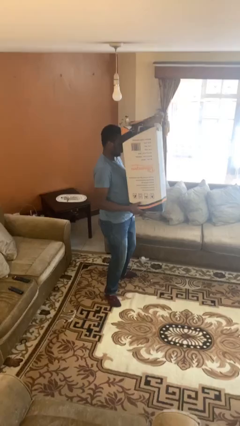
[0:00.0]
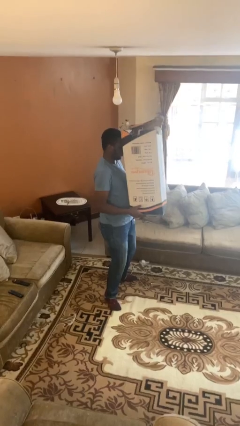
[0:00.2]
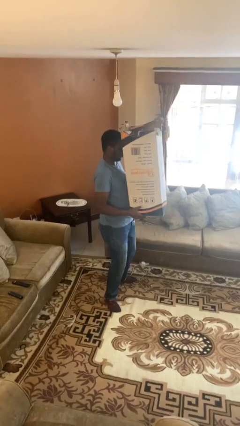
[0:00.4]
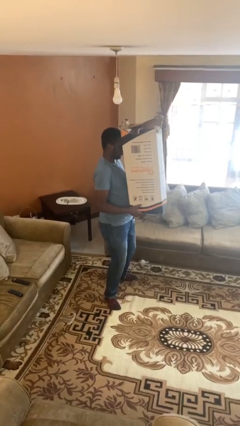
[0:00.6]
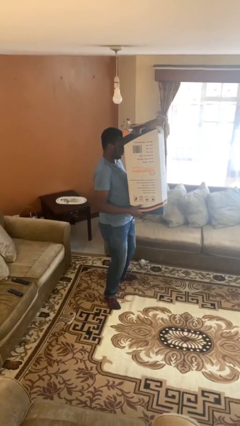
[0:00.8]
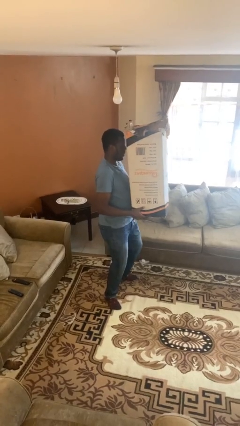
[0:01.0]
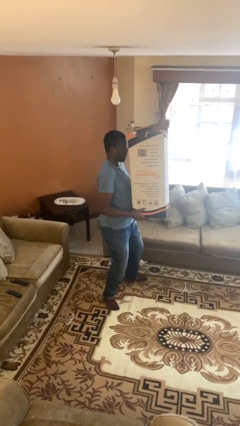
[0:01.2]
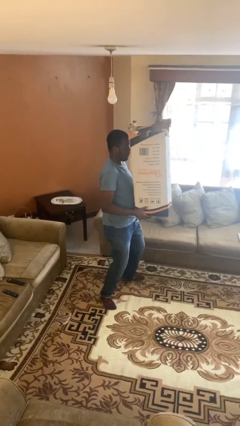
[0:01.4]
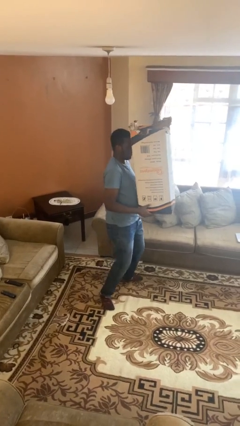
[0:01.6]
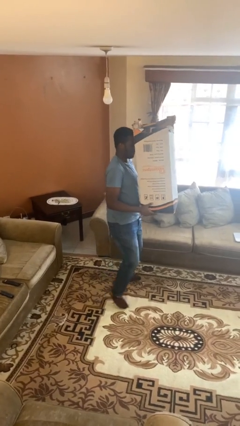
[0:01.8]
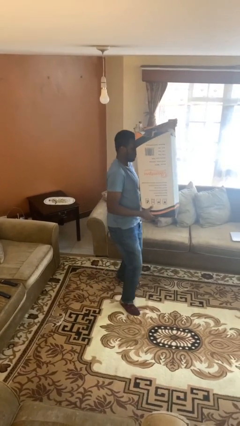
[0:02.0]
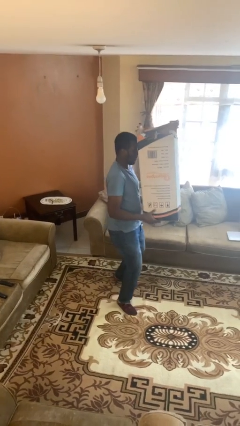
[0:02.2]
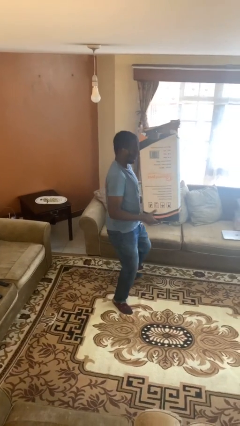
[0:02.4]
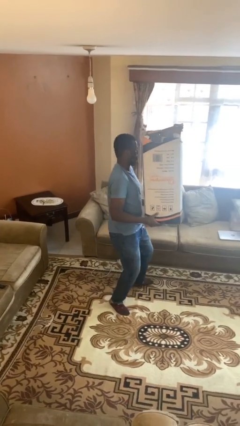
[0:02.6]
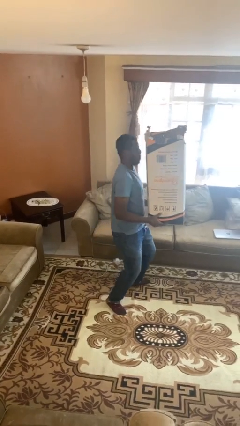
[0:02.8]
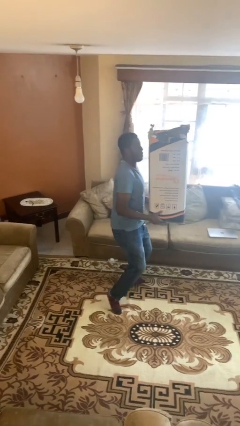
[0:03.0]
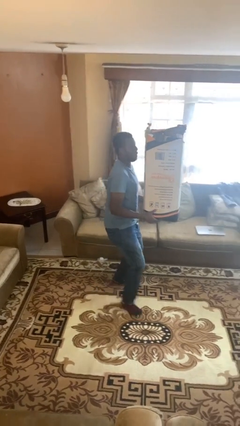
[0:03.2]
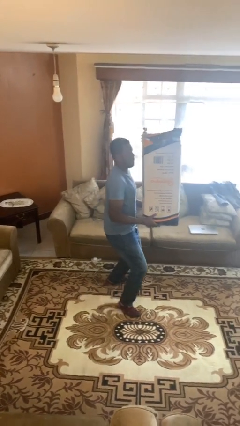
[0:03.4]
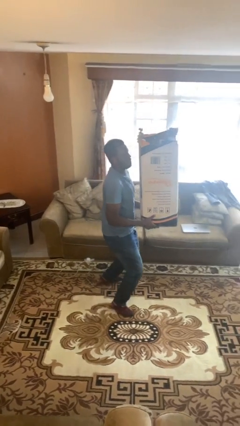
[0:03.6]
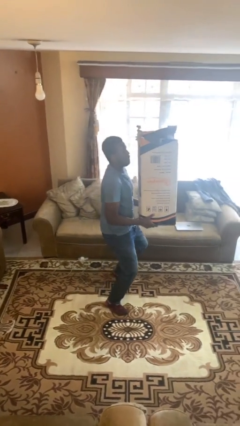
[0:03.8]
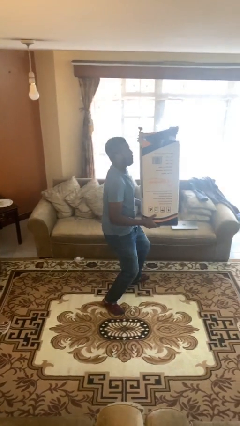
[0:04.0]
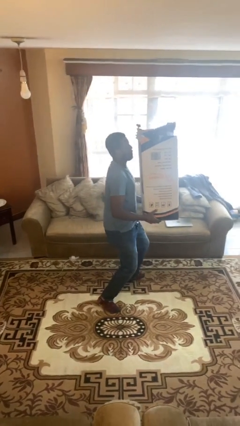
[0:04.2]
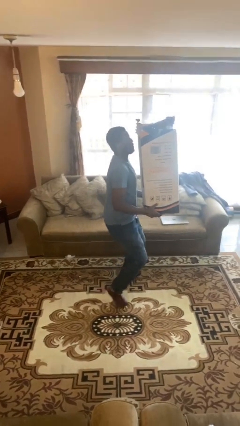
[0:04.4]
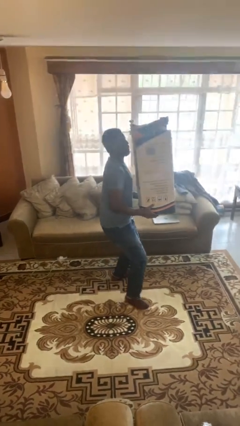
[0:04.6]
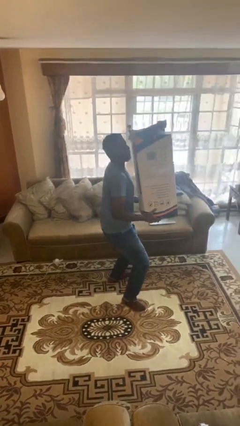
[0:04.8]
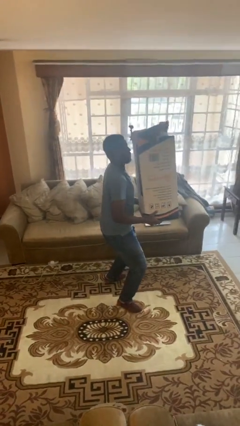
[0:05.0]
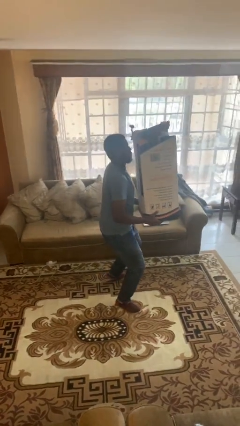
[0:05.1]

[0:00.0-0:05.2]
person carries heavy object

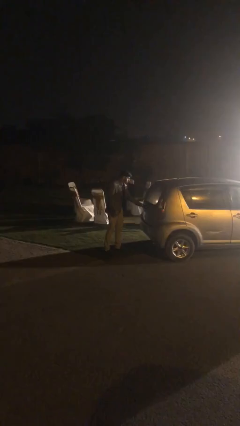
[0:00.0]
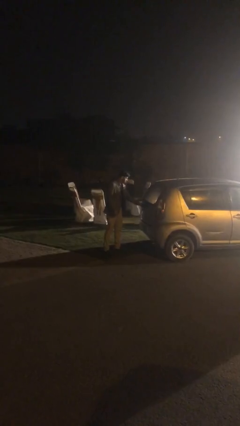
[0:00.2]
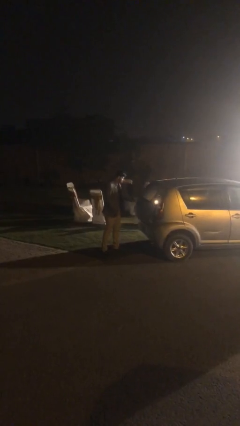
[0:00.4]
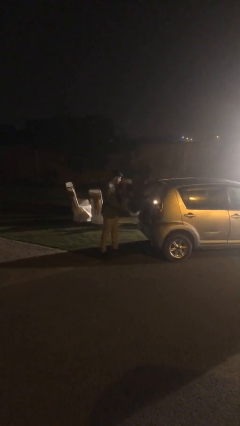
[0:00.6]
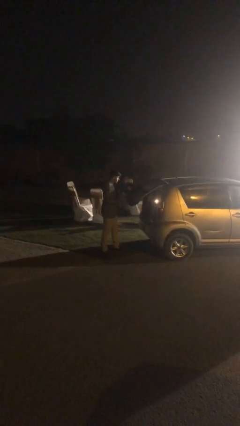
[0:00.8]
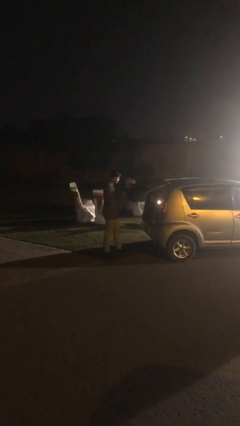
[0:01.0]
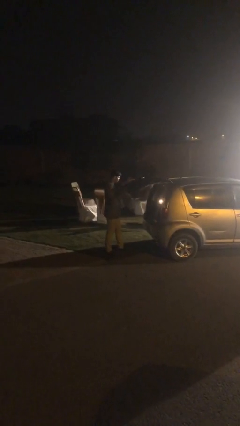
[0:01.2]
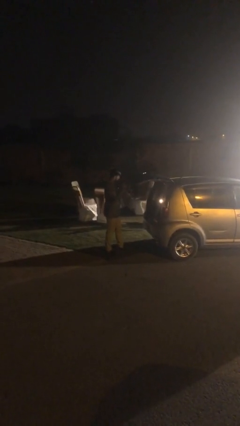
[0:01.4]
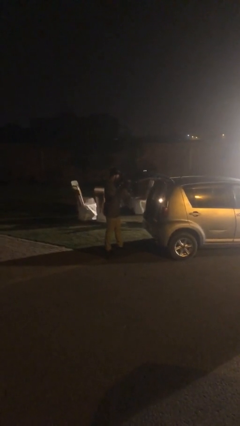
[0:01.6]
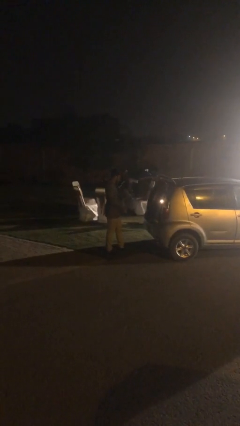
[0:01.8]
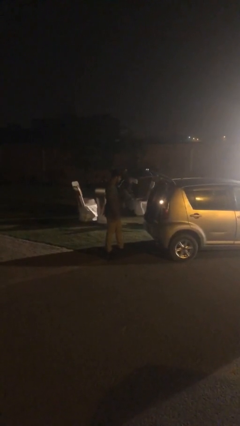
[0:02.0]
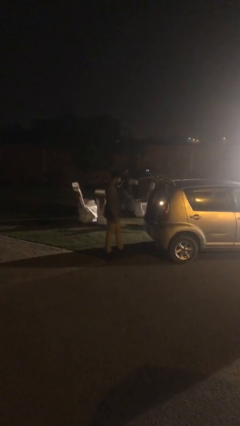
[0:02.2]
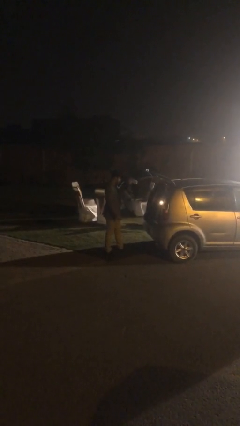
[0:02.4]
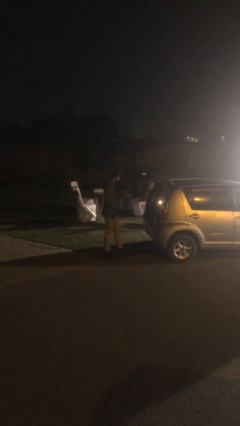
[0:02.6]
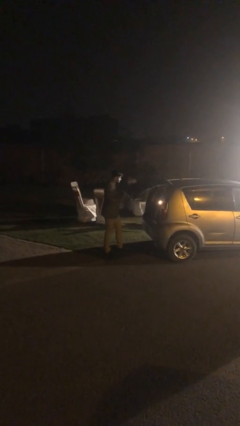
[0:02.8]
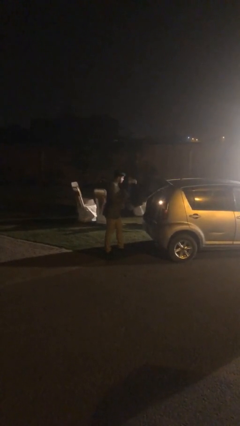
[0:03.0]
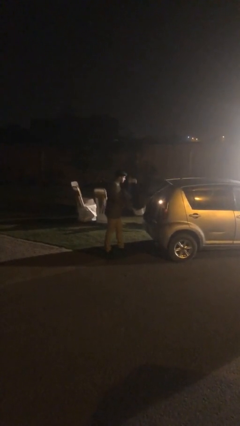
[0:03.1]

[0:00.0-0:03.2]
person opens car trunk

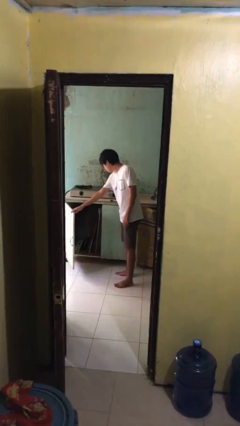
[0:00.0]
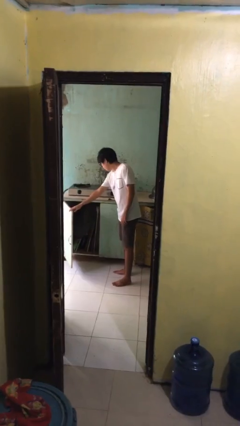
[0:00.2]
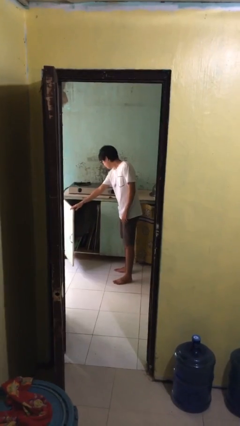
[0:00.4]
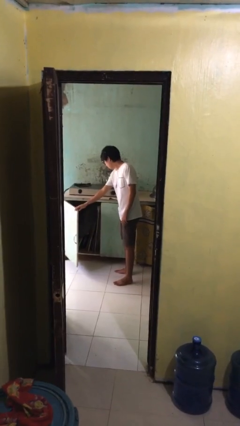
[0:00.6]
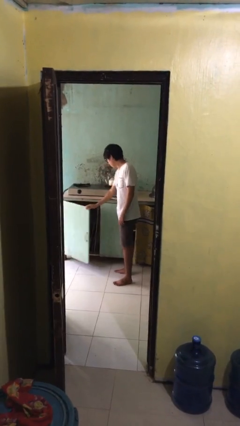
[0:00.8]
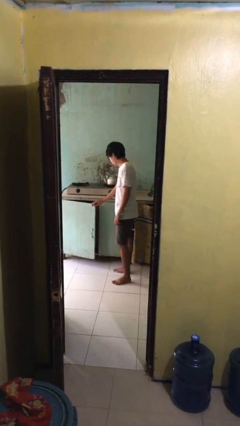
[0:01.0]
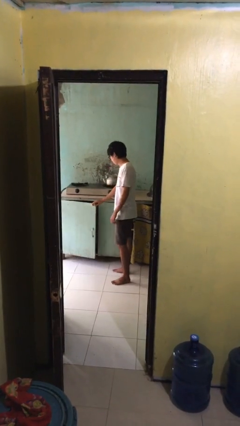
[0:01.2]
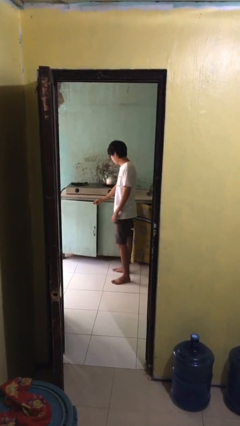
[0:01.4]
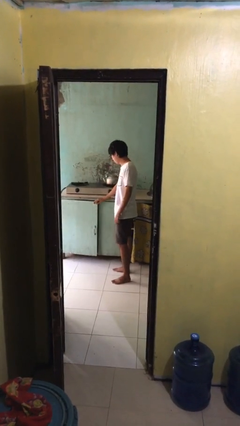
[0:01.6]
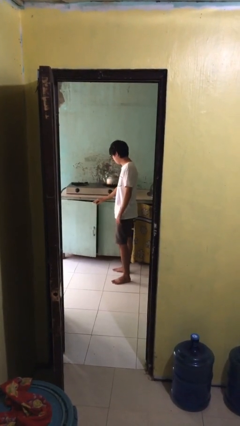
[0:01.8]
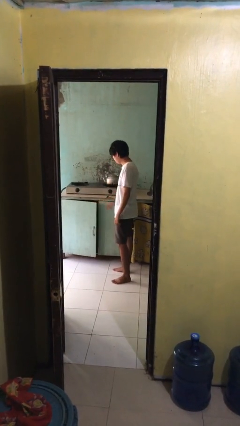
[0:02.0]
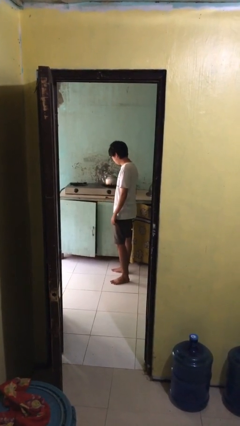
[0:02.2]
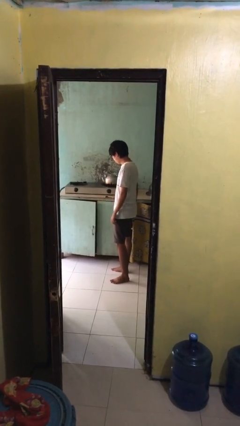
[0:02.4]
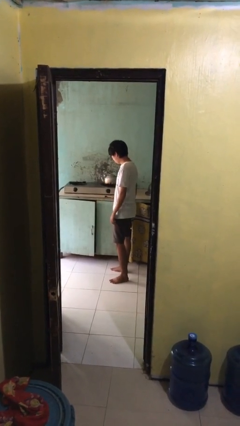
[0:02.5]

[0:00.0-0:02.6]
person closes cabinet

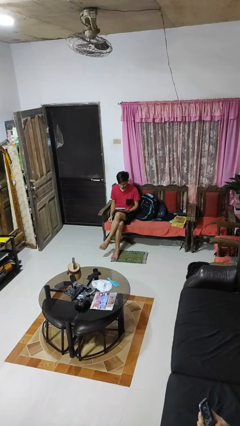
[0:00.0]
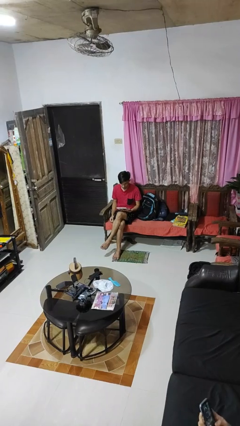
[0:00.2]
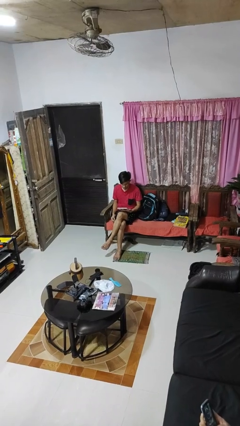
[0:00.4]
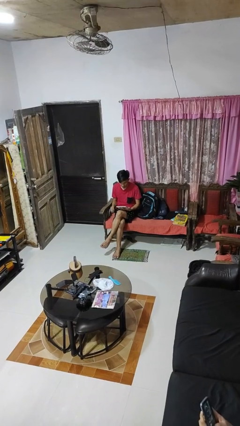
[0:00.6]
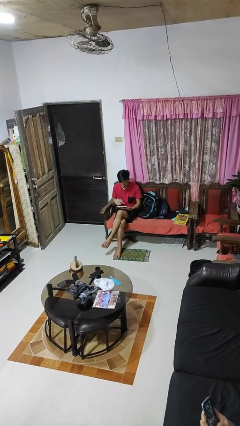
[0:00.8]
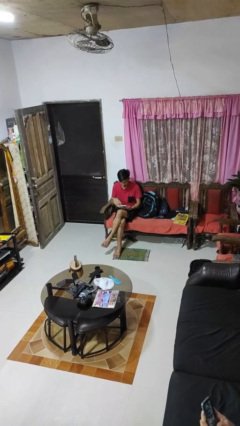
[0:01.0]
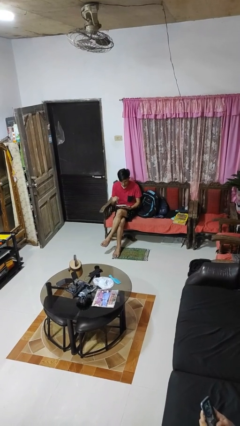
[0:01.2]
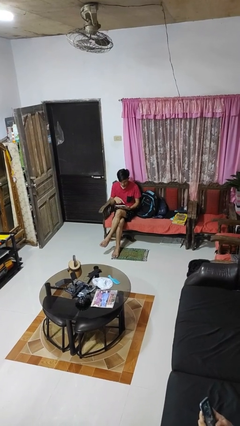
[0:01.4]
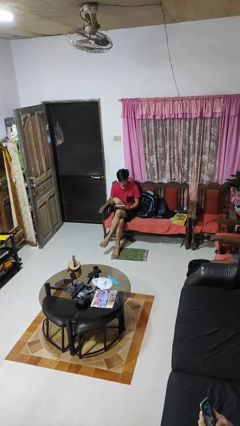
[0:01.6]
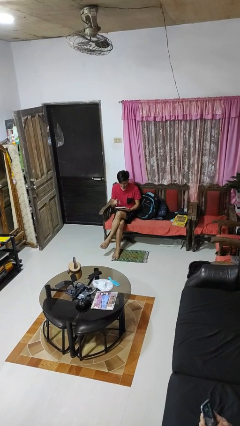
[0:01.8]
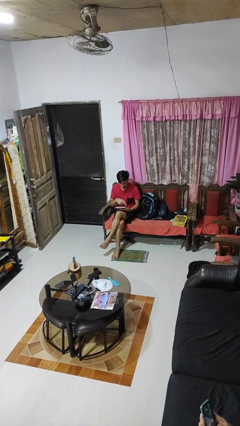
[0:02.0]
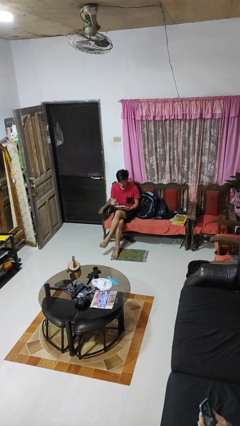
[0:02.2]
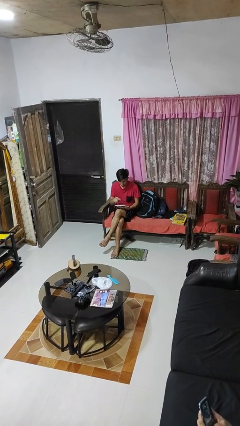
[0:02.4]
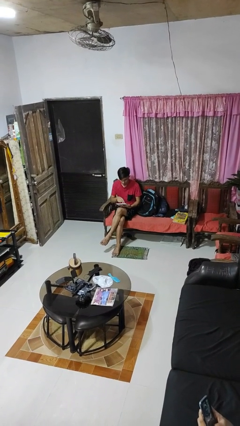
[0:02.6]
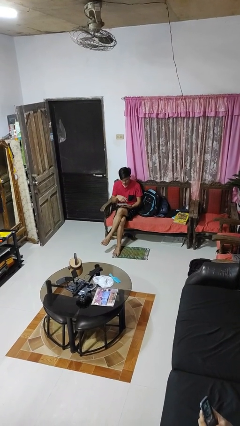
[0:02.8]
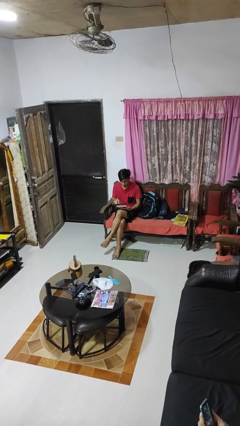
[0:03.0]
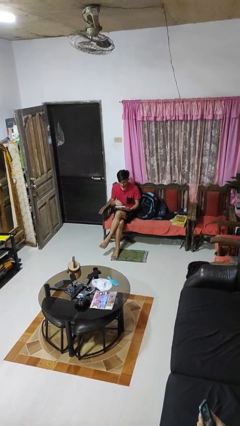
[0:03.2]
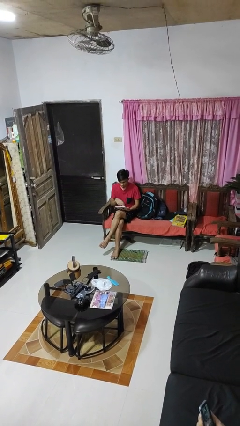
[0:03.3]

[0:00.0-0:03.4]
person interacts with tablet

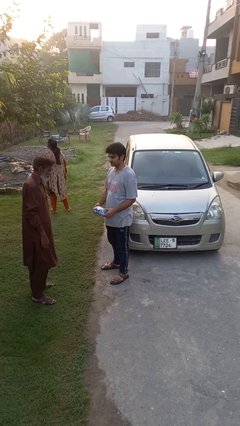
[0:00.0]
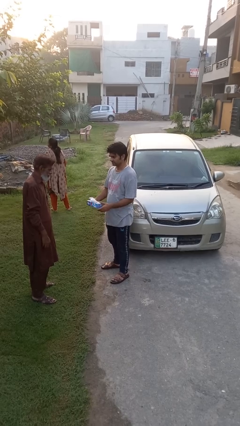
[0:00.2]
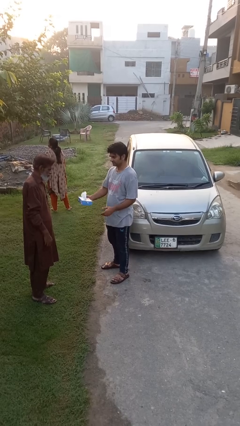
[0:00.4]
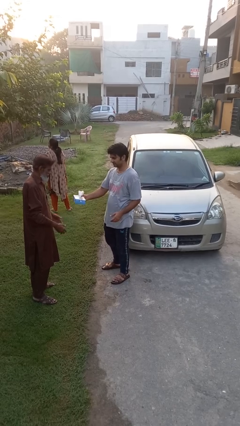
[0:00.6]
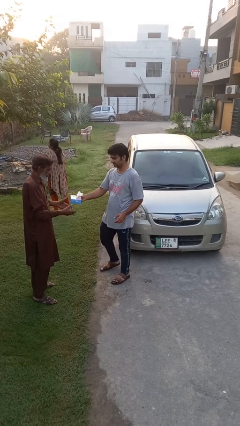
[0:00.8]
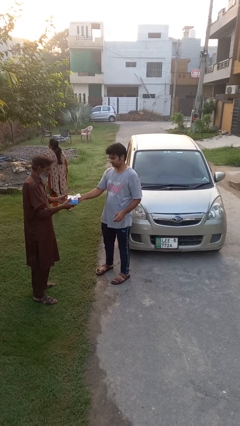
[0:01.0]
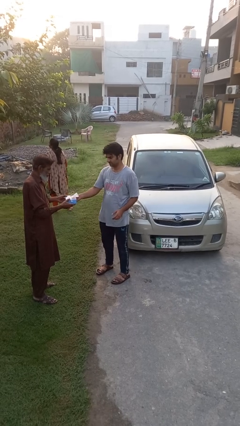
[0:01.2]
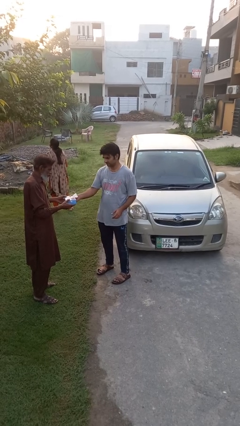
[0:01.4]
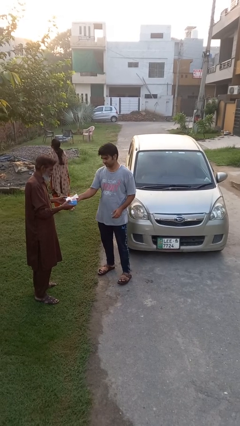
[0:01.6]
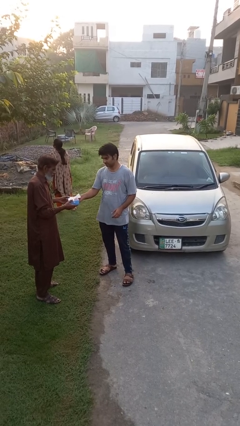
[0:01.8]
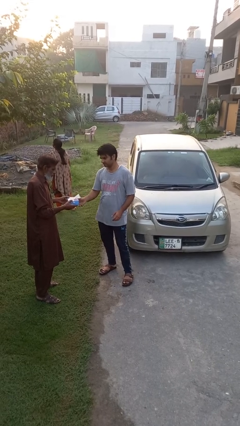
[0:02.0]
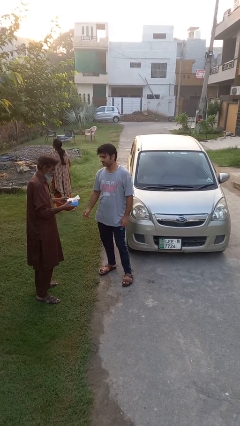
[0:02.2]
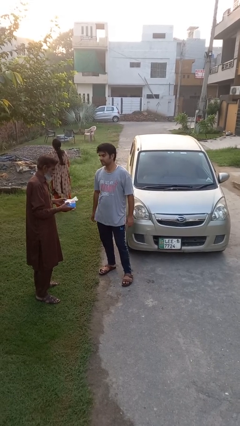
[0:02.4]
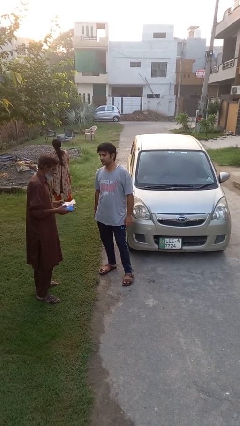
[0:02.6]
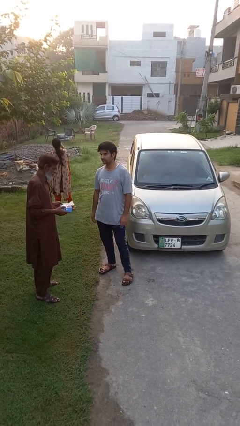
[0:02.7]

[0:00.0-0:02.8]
person transfers object to person

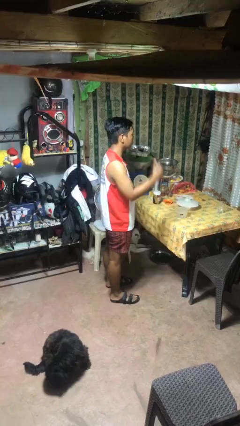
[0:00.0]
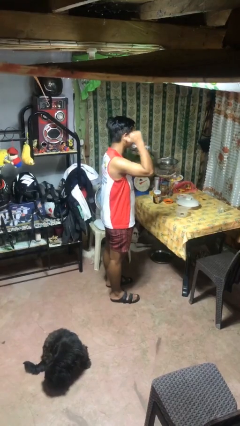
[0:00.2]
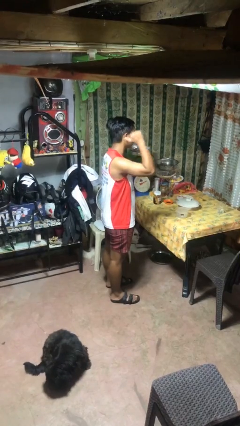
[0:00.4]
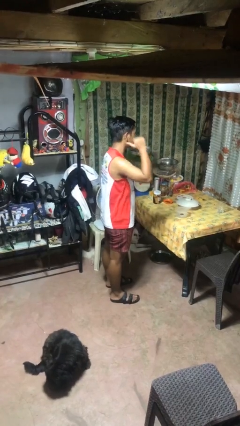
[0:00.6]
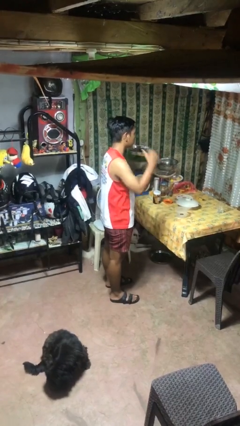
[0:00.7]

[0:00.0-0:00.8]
person gestures behind me
